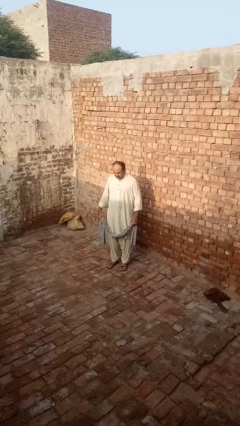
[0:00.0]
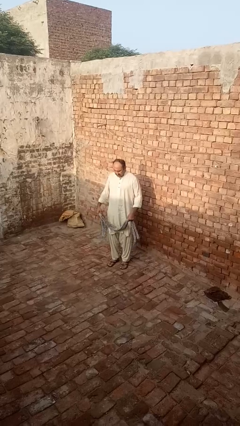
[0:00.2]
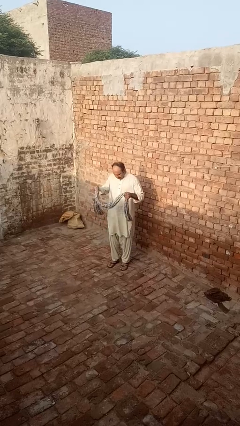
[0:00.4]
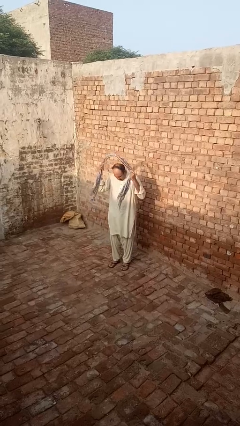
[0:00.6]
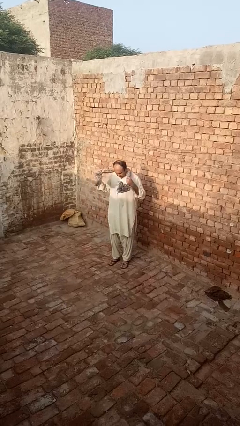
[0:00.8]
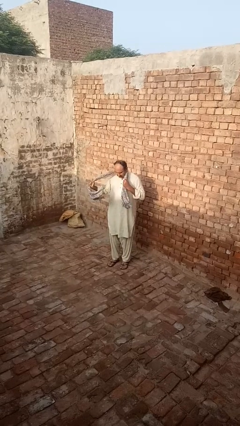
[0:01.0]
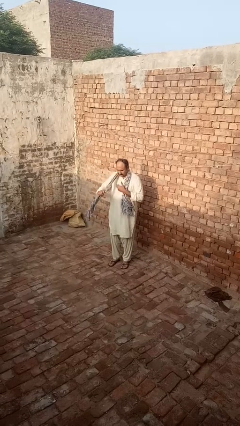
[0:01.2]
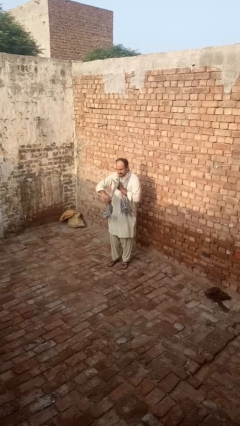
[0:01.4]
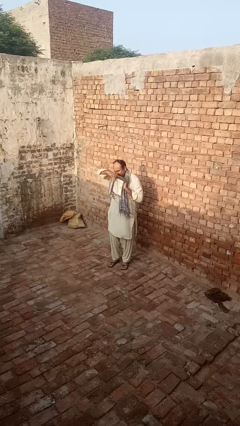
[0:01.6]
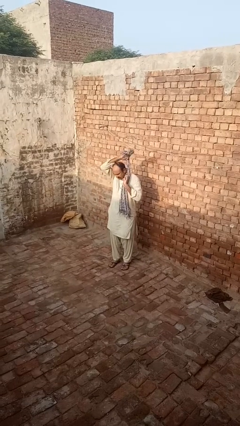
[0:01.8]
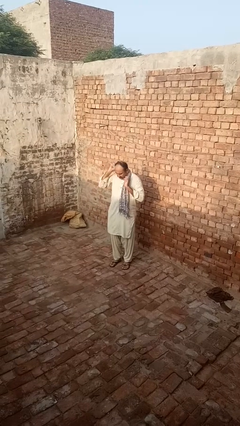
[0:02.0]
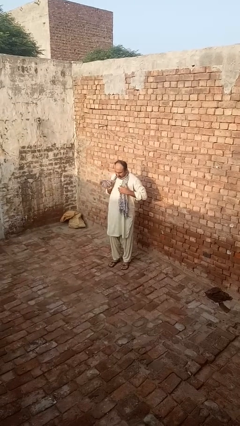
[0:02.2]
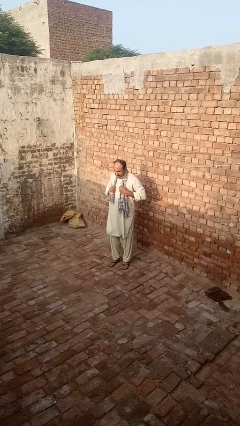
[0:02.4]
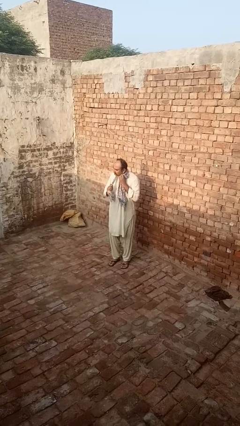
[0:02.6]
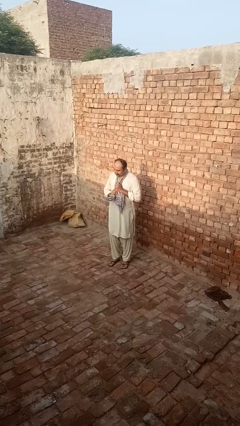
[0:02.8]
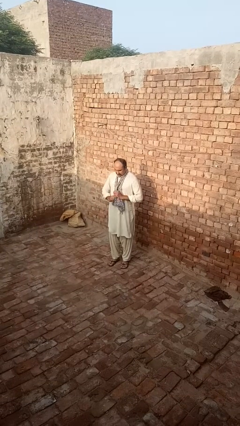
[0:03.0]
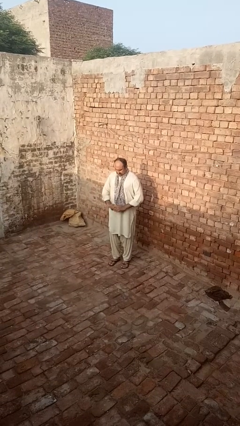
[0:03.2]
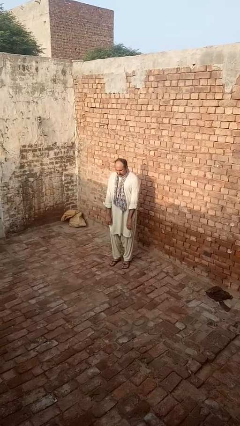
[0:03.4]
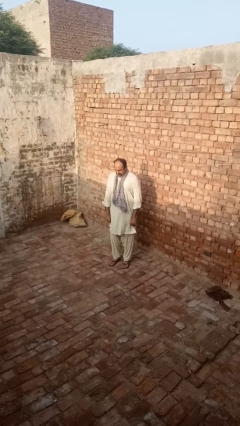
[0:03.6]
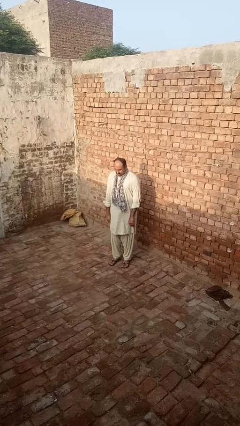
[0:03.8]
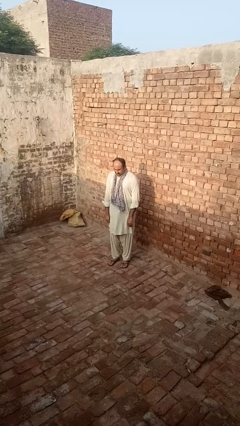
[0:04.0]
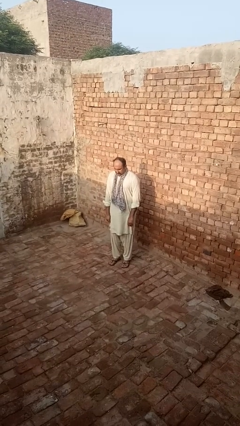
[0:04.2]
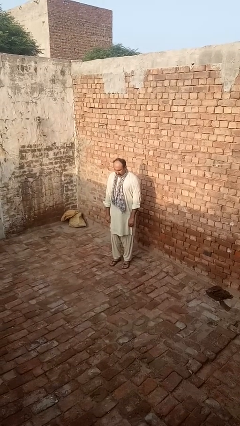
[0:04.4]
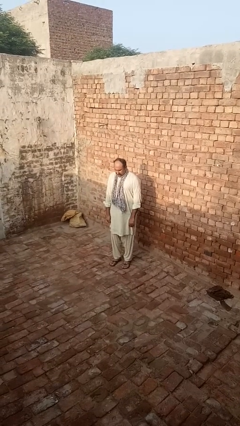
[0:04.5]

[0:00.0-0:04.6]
person puts on scarf

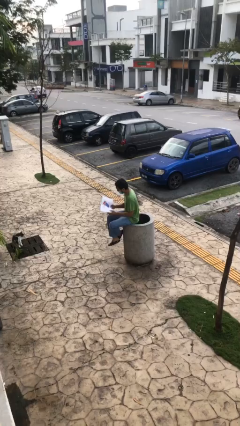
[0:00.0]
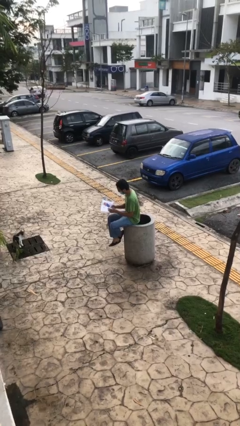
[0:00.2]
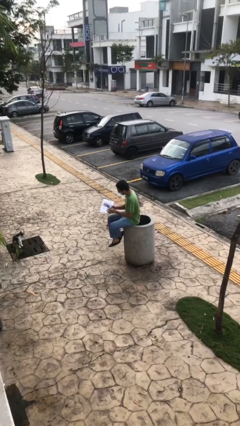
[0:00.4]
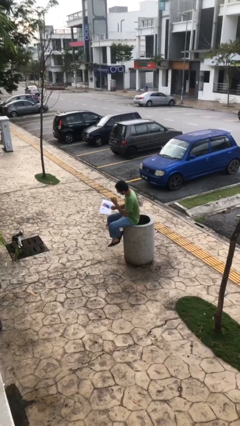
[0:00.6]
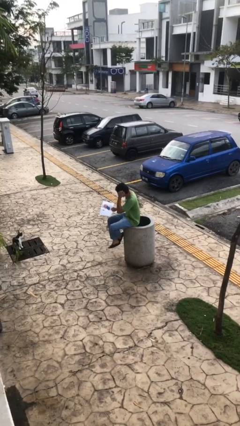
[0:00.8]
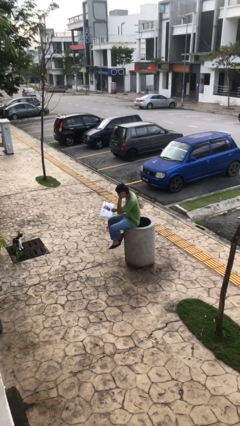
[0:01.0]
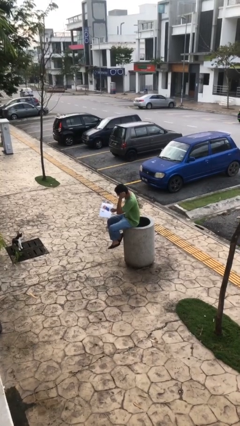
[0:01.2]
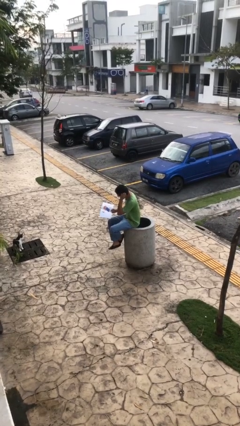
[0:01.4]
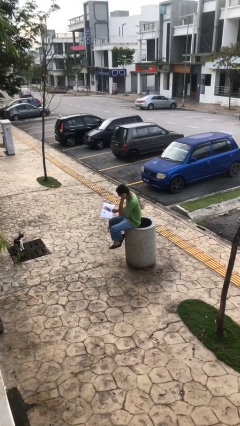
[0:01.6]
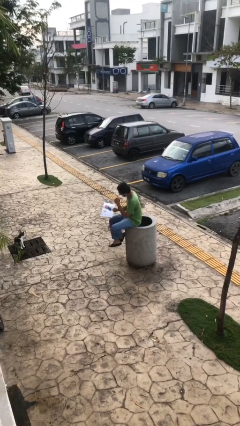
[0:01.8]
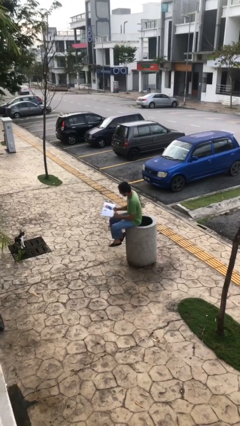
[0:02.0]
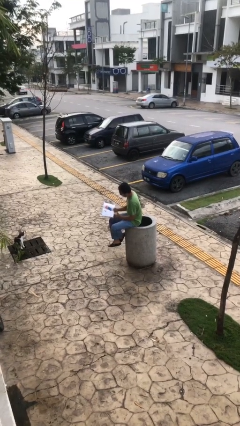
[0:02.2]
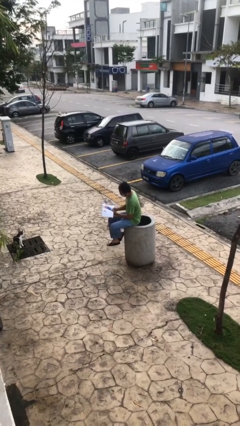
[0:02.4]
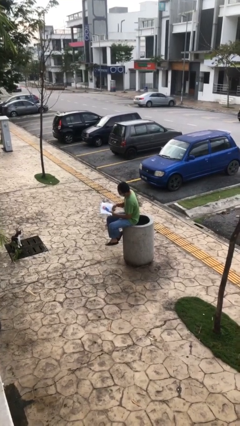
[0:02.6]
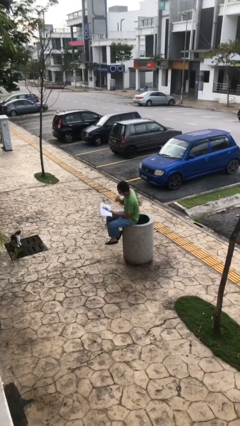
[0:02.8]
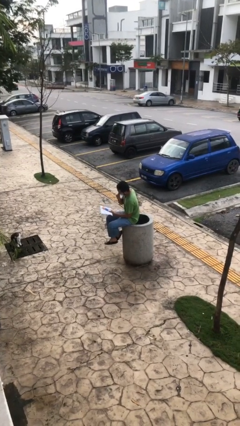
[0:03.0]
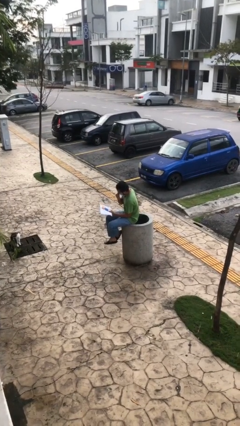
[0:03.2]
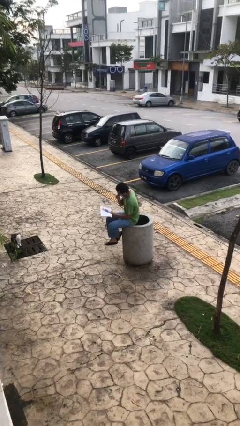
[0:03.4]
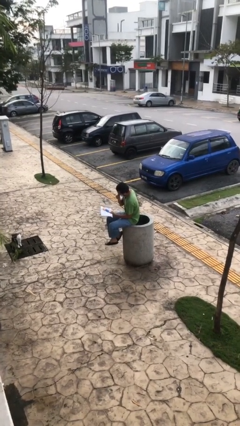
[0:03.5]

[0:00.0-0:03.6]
person reads document

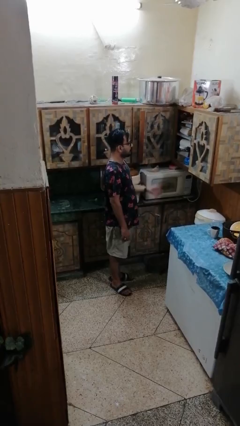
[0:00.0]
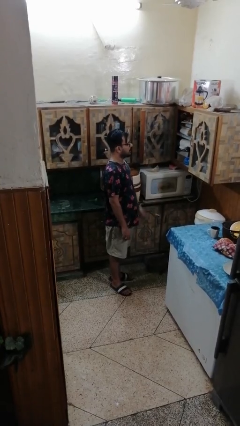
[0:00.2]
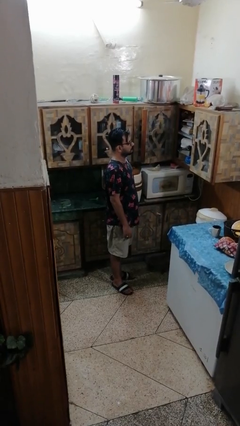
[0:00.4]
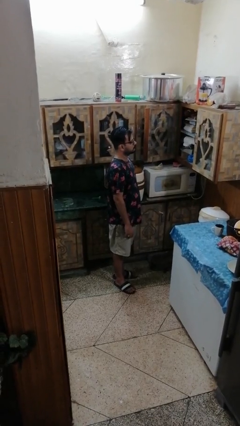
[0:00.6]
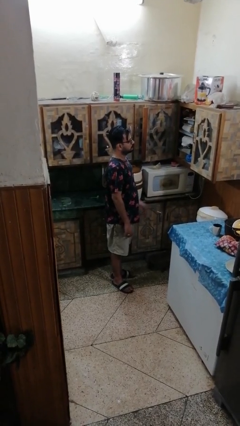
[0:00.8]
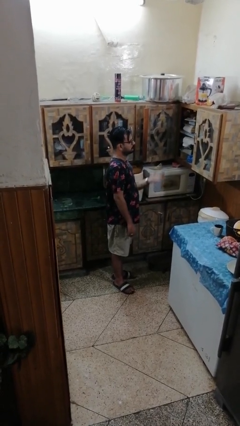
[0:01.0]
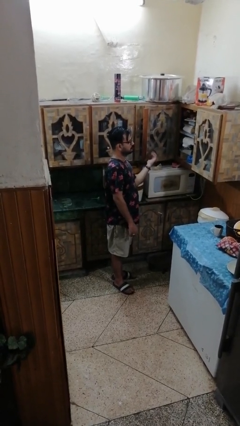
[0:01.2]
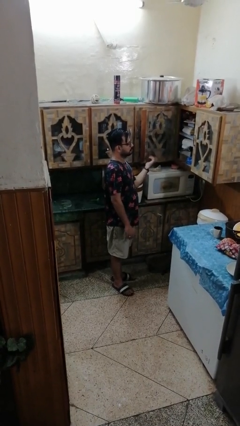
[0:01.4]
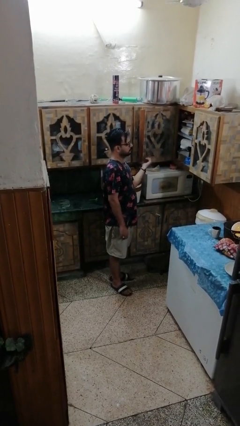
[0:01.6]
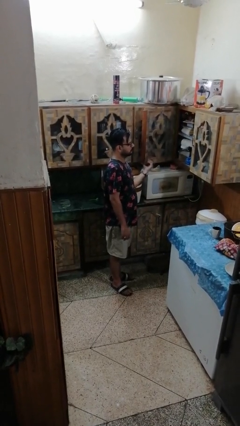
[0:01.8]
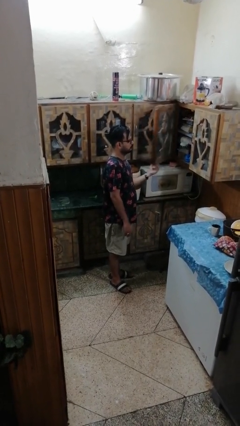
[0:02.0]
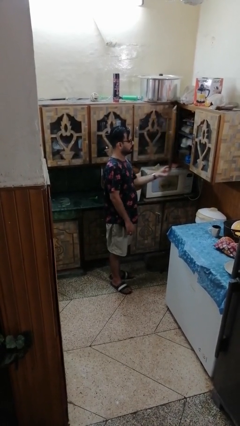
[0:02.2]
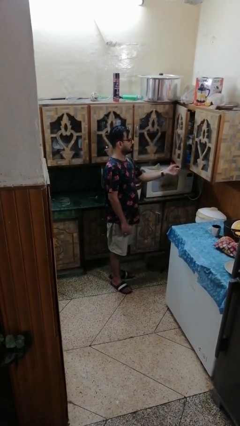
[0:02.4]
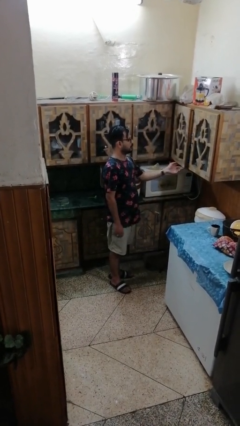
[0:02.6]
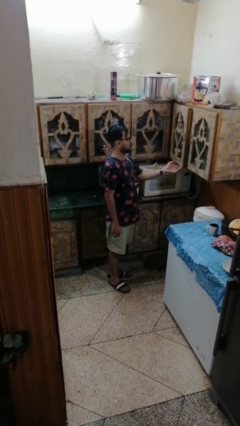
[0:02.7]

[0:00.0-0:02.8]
person closes cabinet

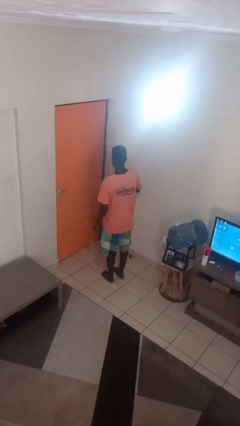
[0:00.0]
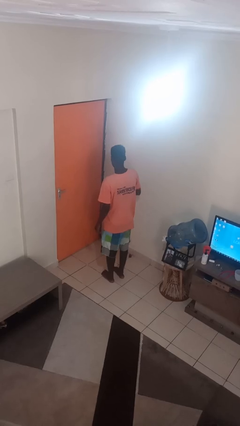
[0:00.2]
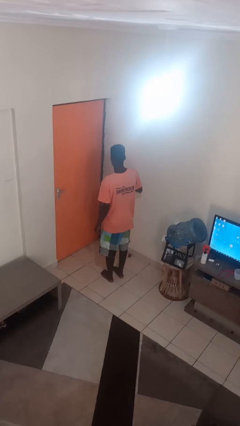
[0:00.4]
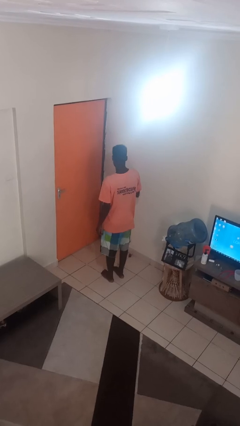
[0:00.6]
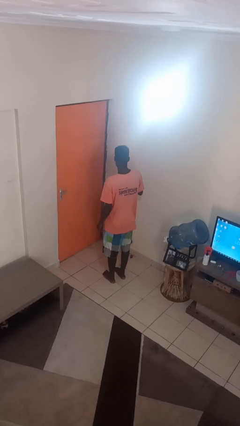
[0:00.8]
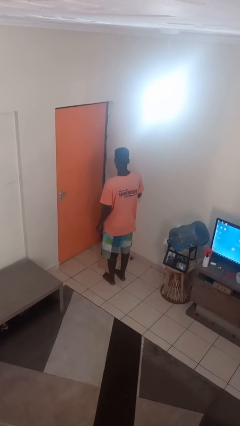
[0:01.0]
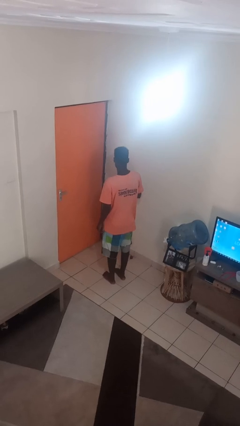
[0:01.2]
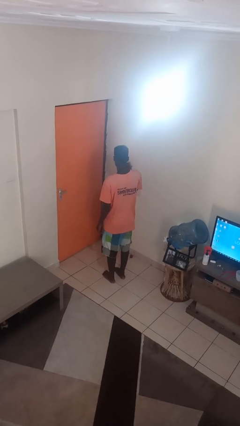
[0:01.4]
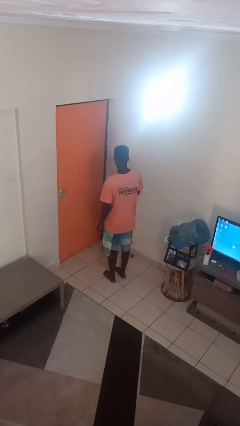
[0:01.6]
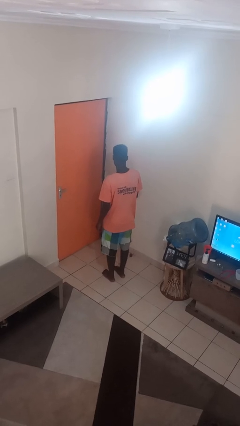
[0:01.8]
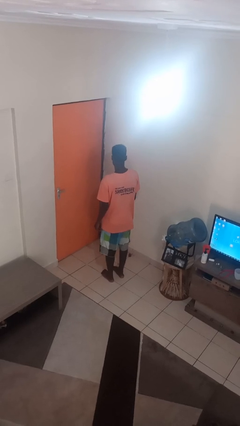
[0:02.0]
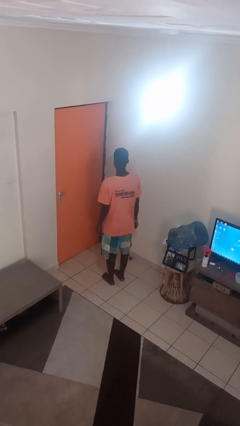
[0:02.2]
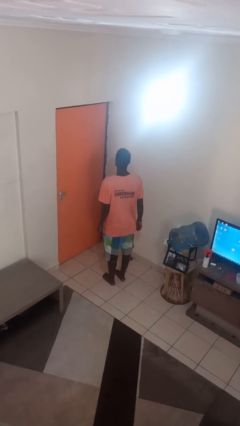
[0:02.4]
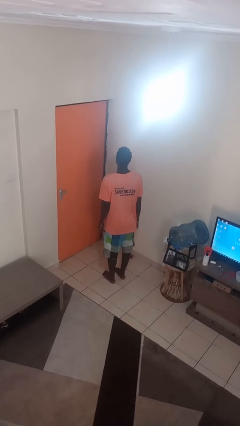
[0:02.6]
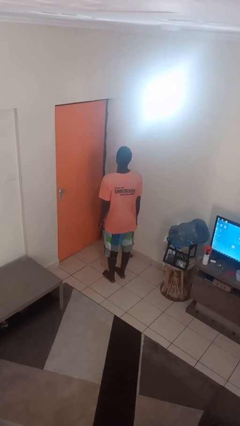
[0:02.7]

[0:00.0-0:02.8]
person snaps fingers

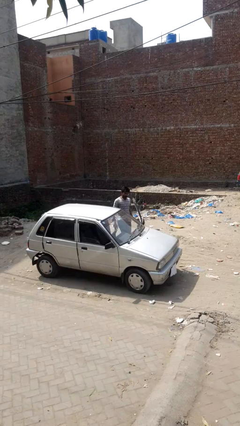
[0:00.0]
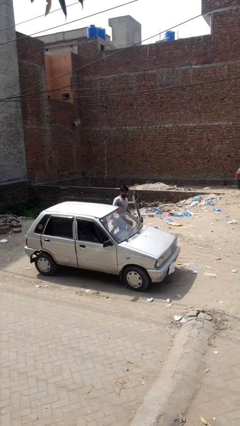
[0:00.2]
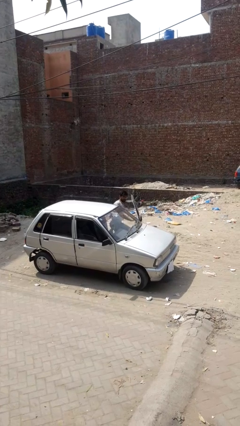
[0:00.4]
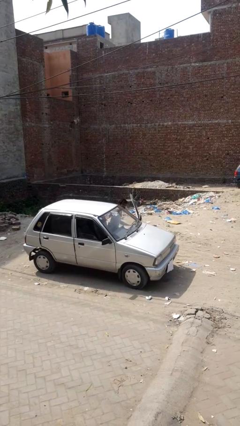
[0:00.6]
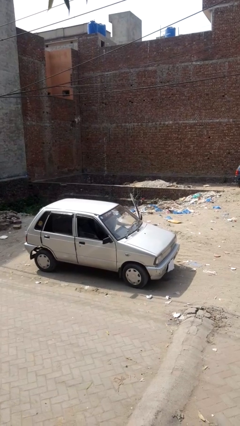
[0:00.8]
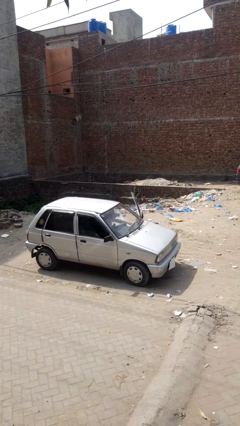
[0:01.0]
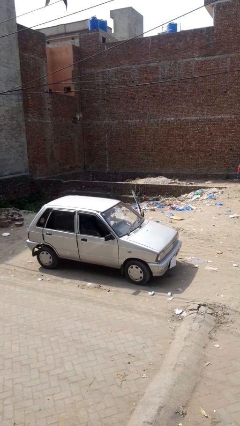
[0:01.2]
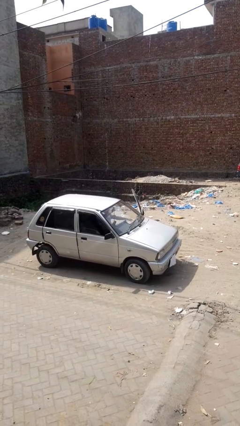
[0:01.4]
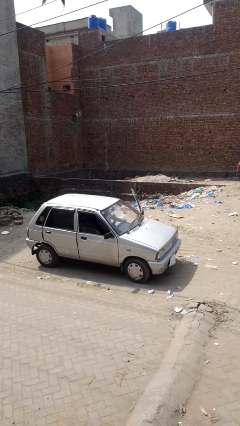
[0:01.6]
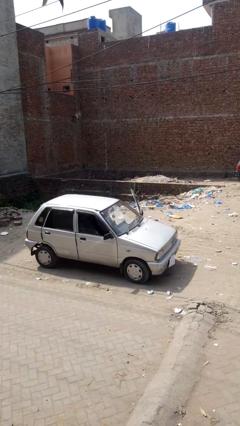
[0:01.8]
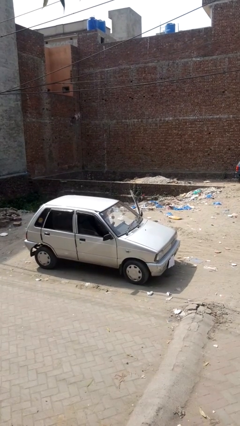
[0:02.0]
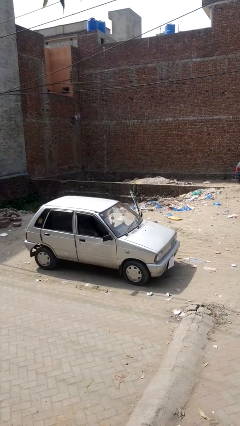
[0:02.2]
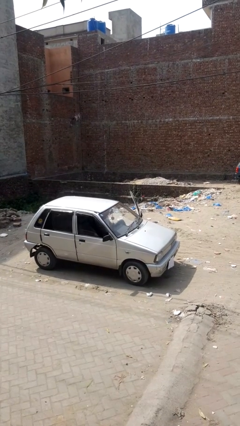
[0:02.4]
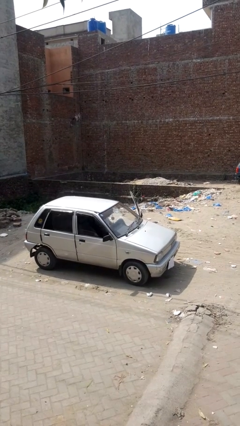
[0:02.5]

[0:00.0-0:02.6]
person enters car

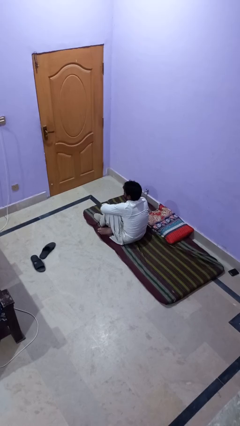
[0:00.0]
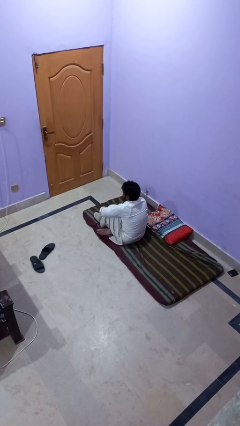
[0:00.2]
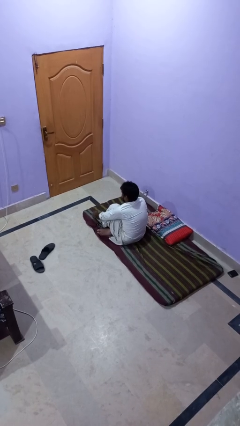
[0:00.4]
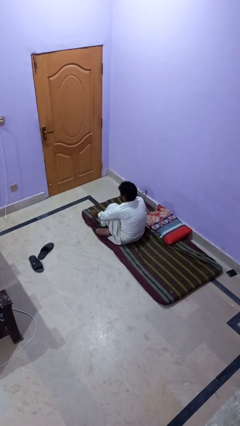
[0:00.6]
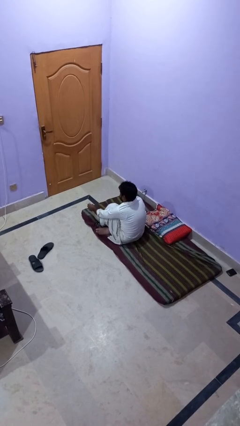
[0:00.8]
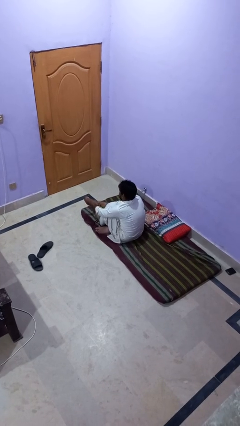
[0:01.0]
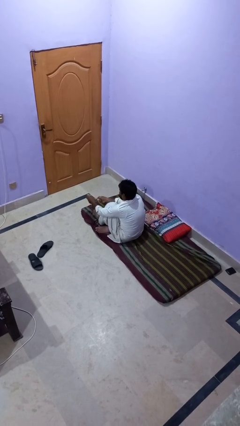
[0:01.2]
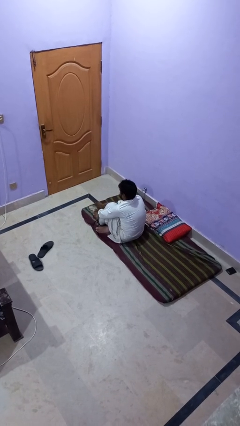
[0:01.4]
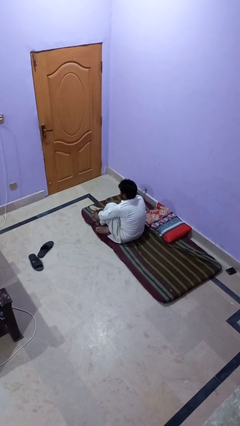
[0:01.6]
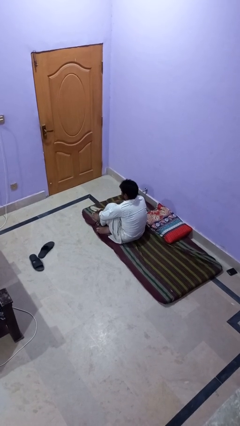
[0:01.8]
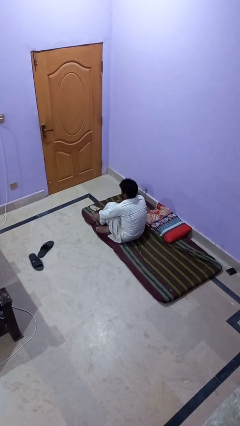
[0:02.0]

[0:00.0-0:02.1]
person takes off socks
